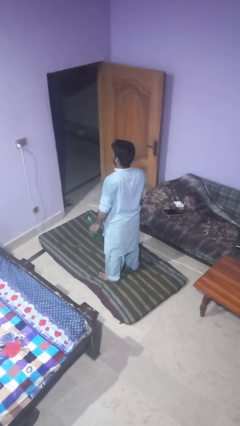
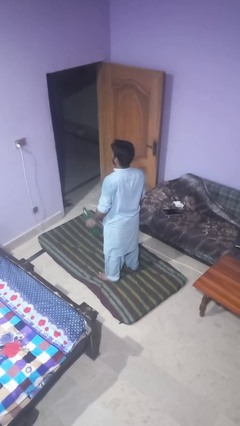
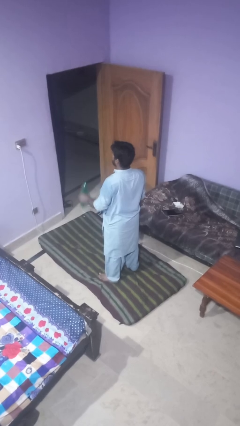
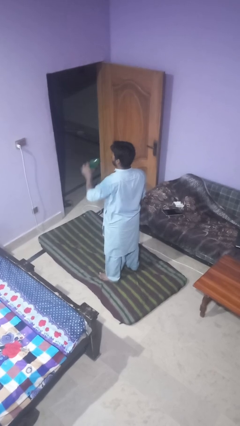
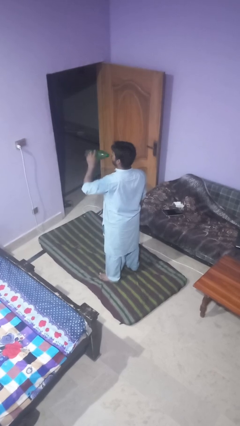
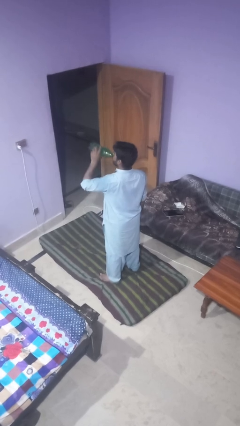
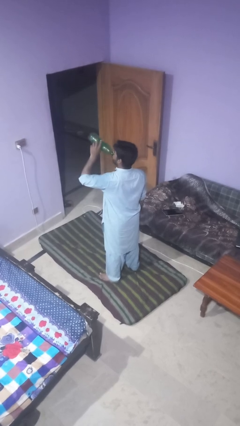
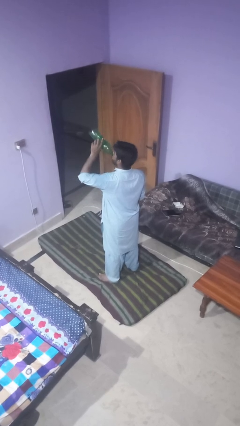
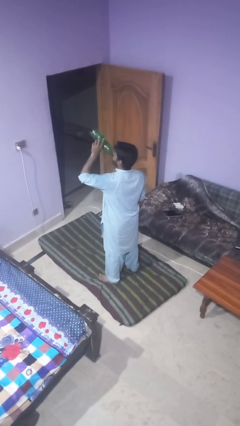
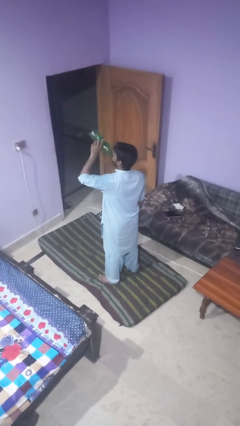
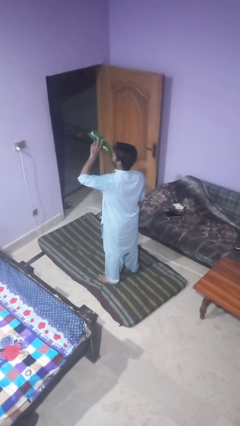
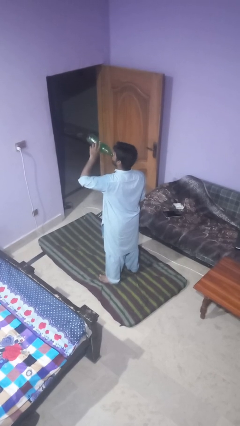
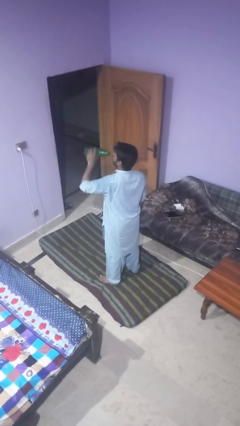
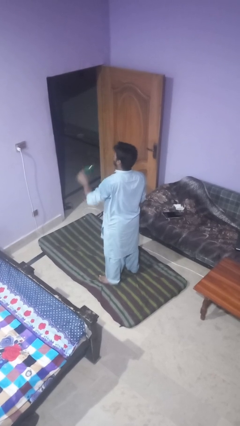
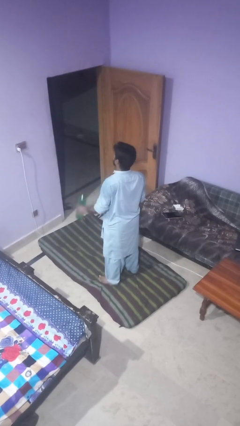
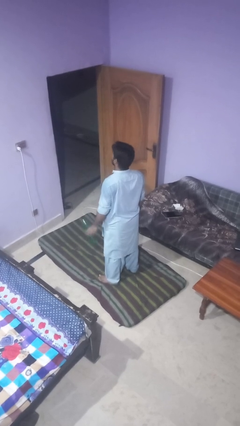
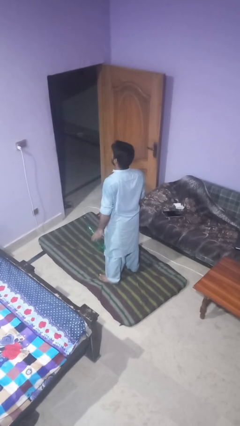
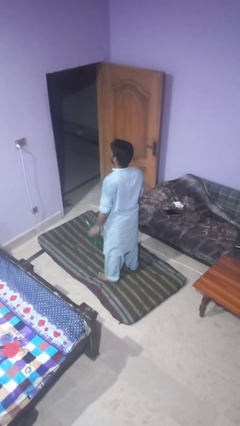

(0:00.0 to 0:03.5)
person drinks from bottle

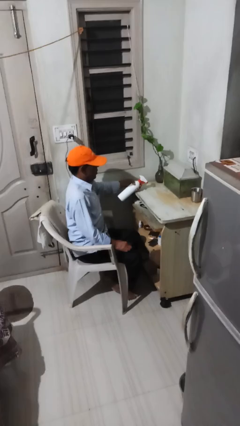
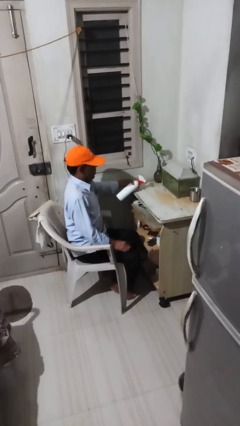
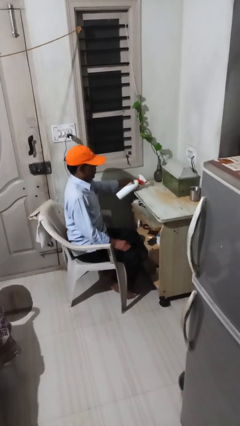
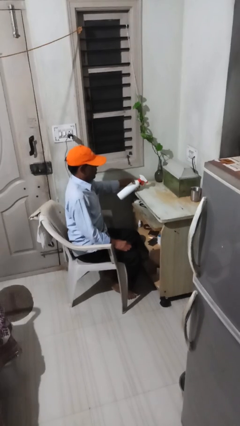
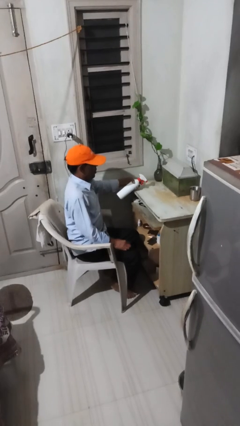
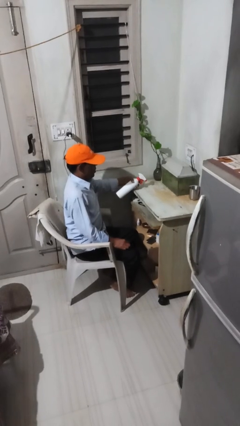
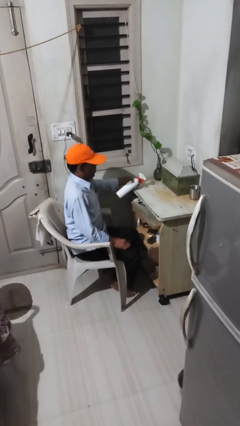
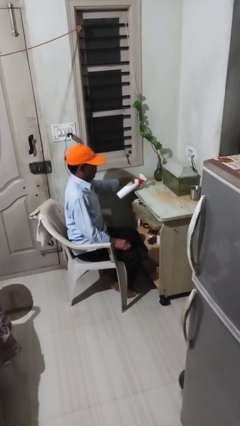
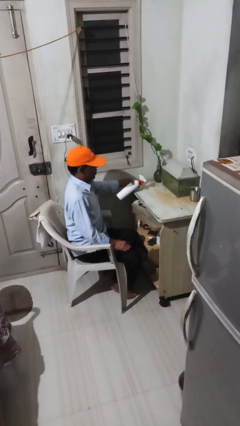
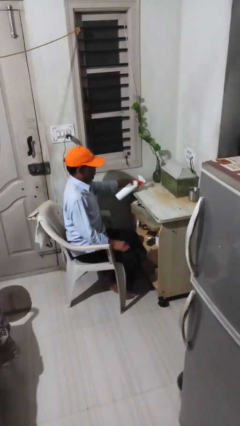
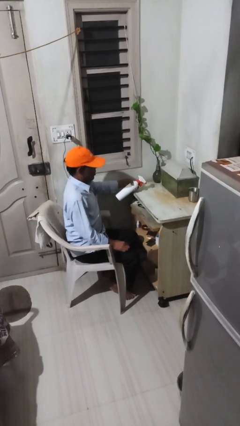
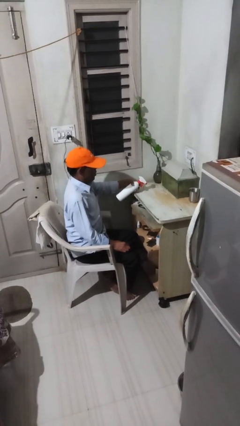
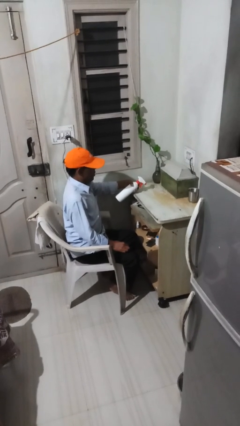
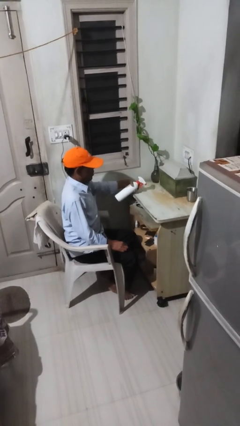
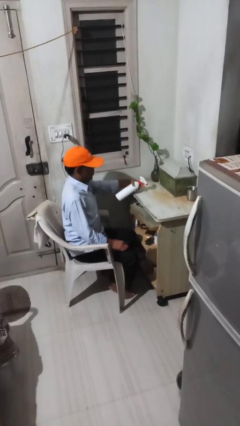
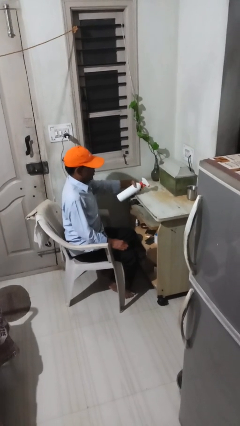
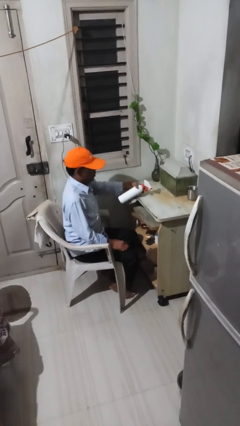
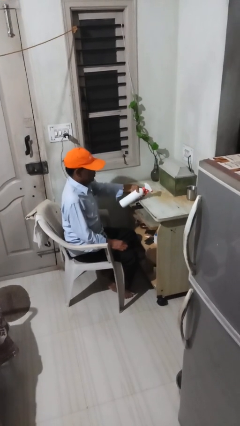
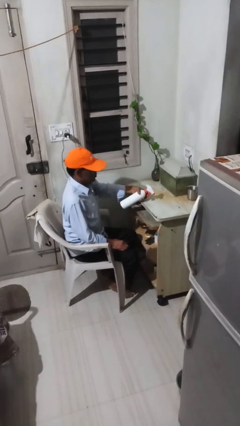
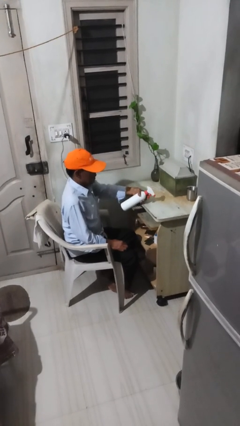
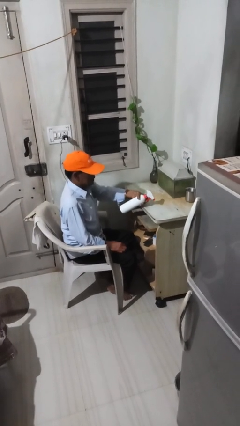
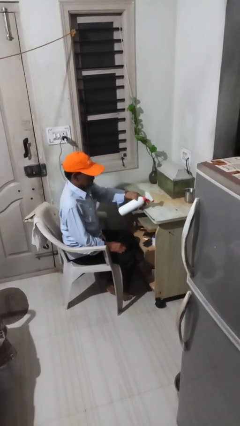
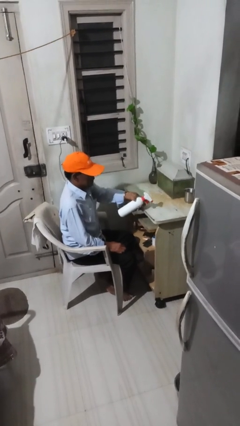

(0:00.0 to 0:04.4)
person sprays from bottle

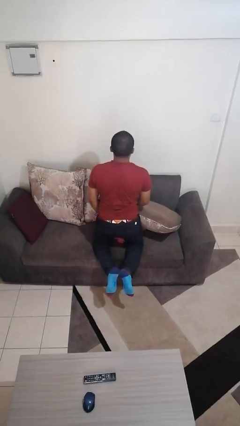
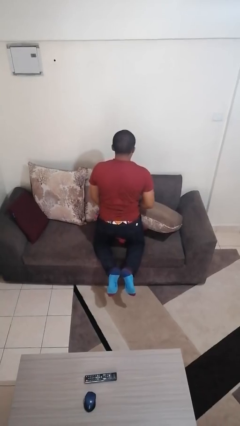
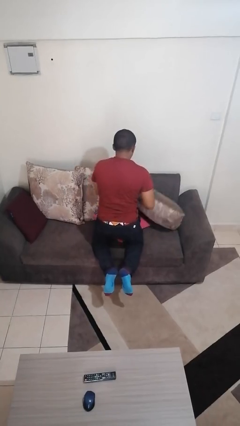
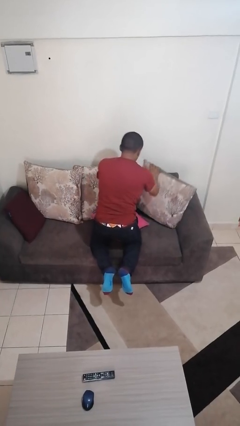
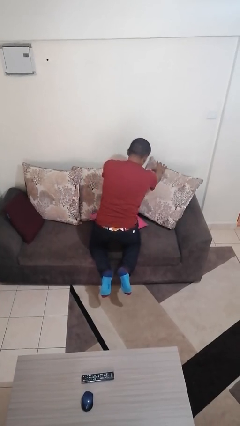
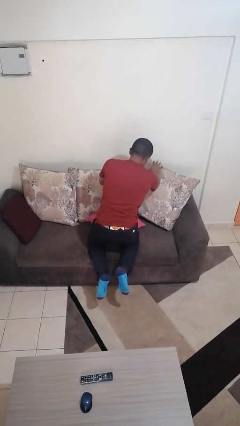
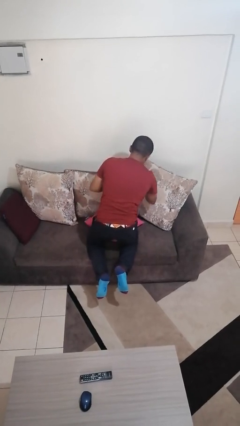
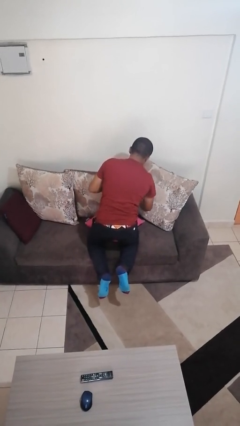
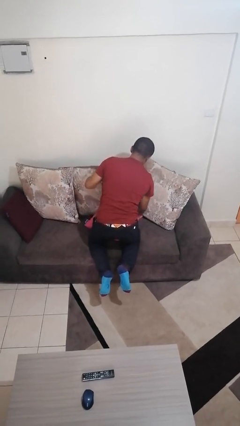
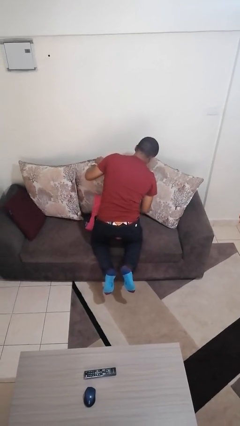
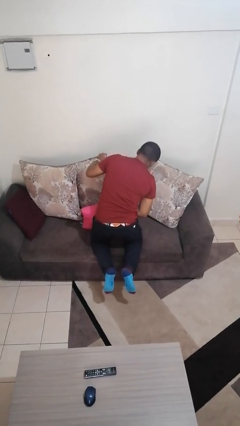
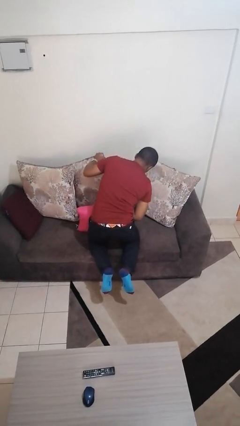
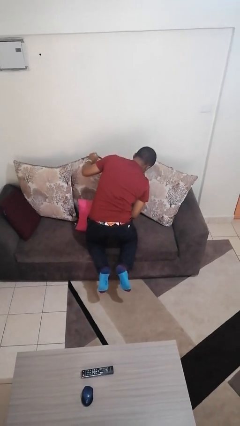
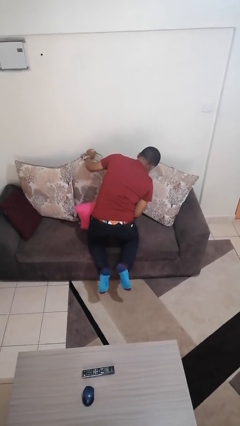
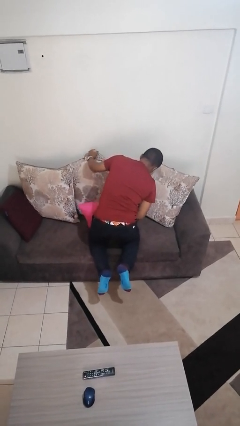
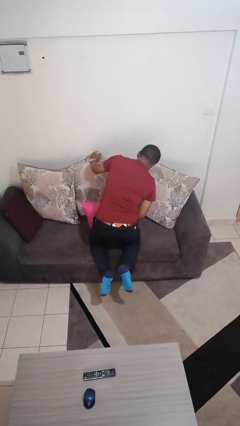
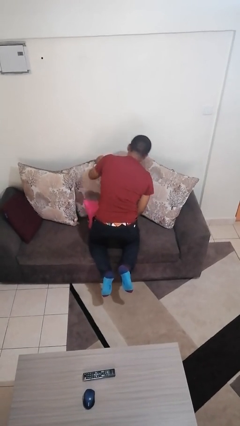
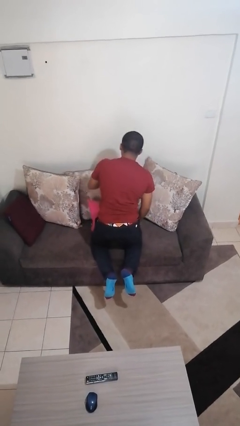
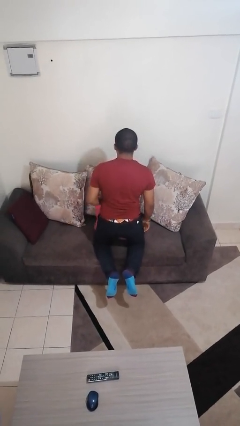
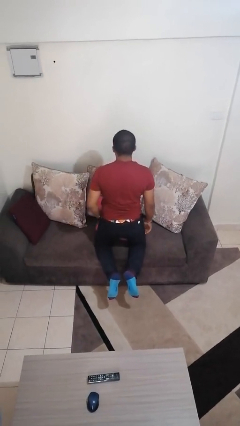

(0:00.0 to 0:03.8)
person searches in couch

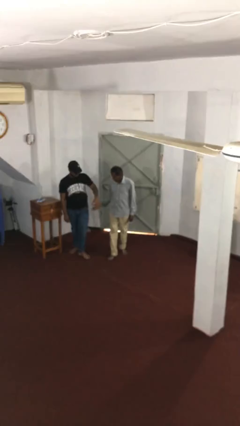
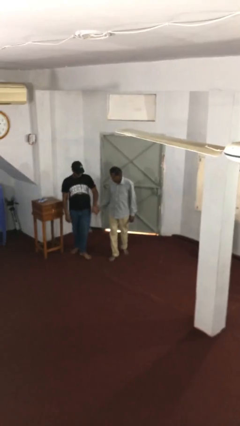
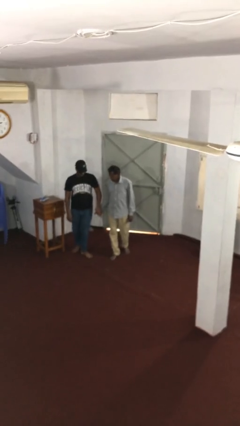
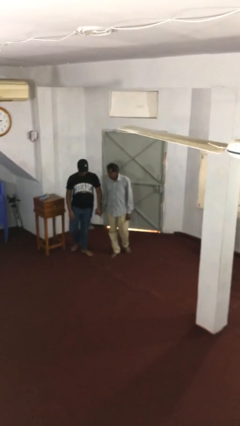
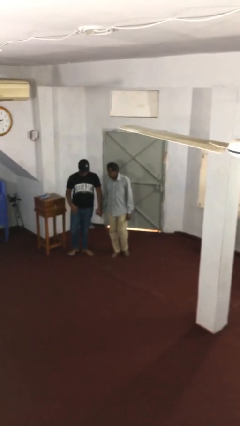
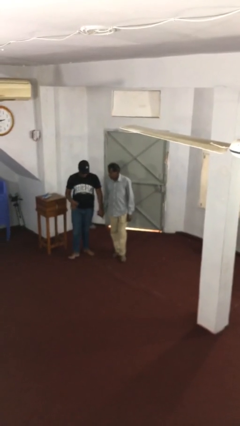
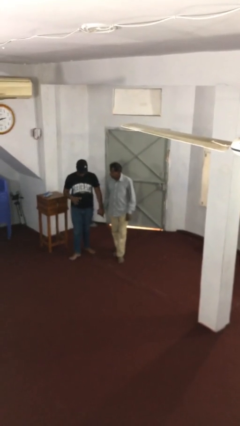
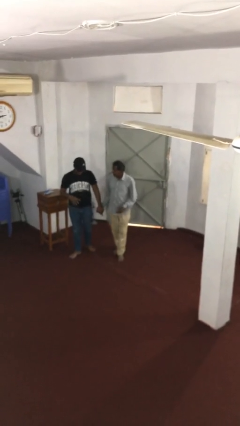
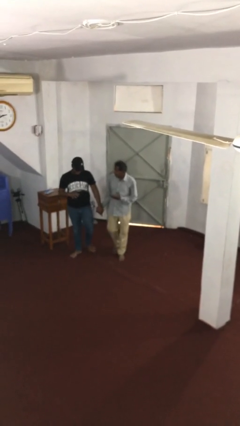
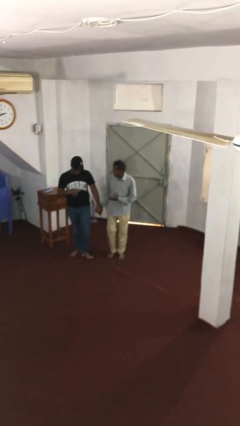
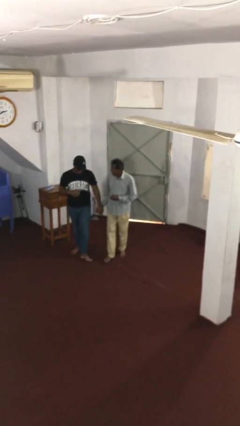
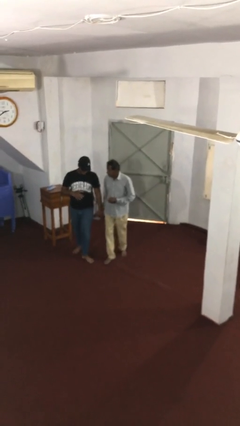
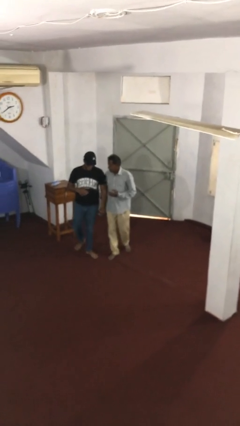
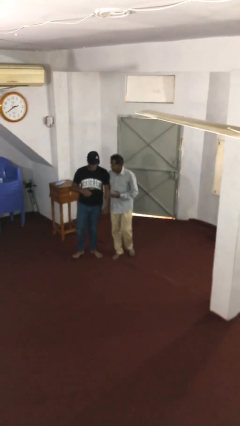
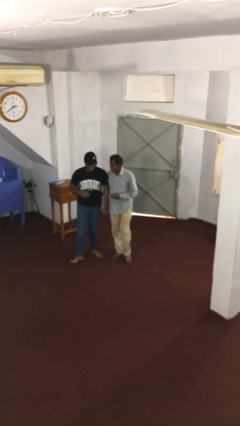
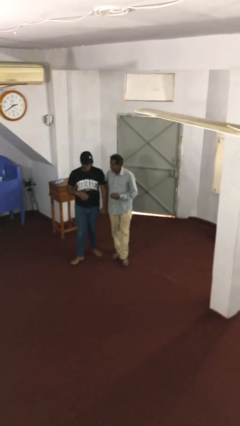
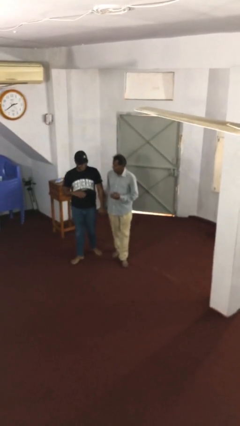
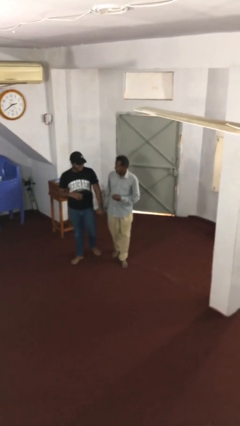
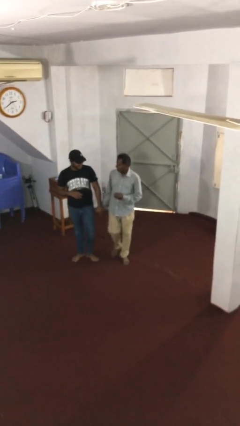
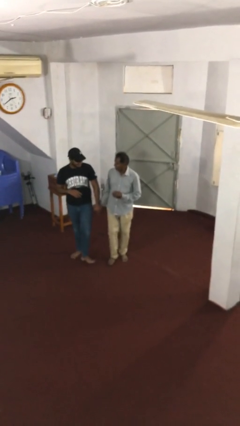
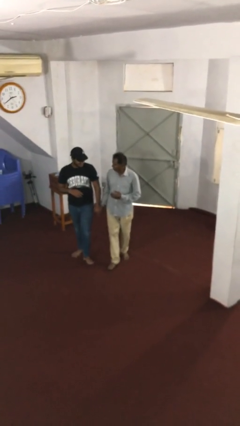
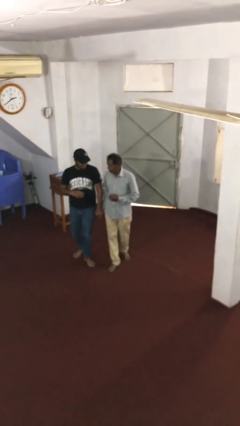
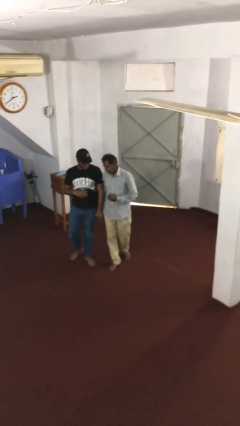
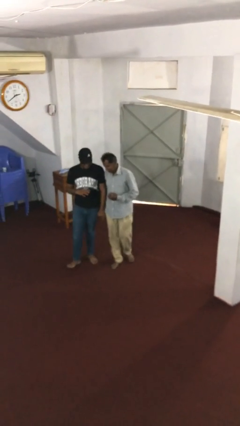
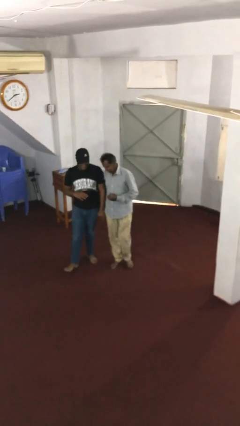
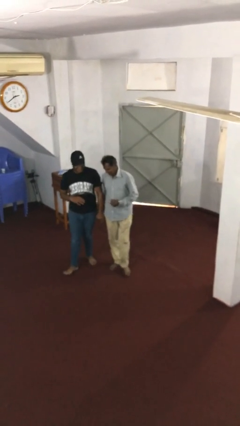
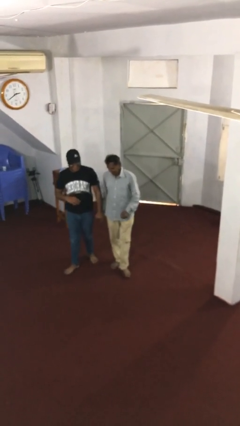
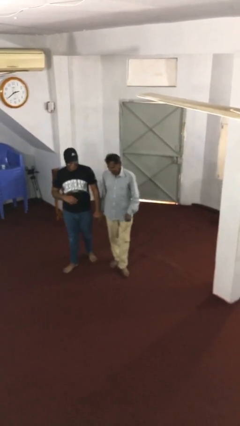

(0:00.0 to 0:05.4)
person holds hand

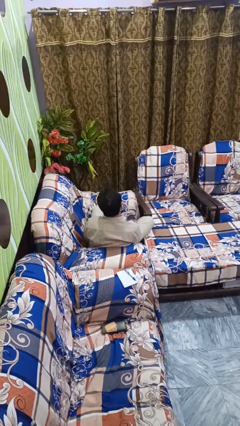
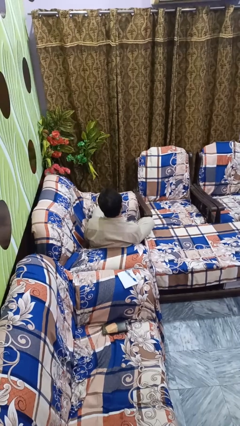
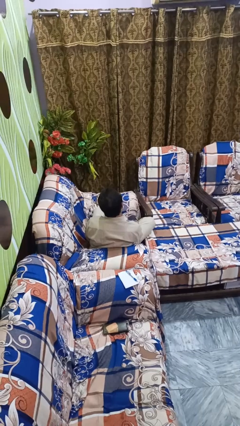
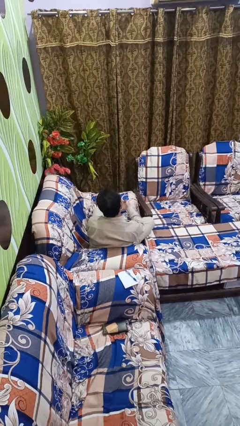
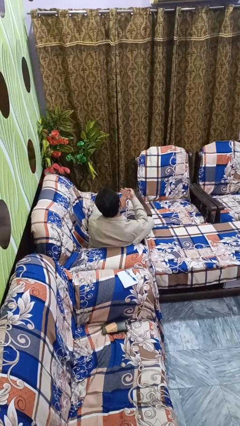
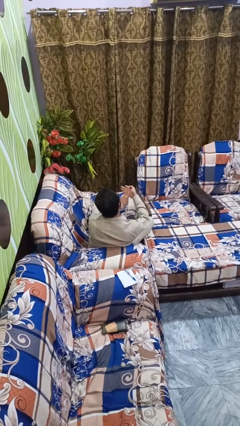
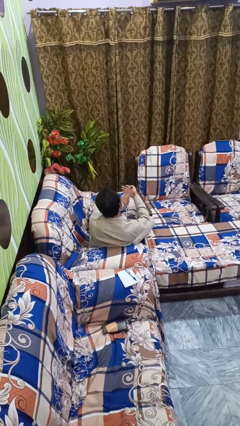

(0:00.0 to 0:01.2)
person gestures number three
